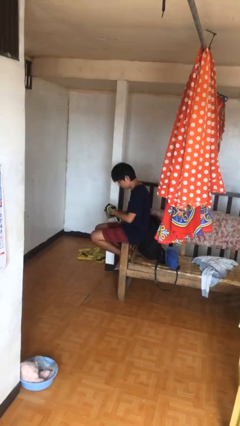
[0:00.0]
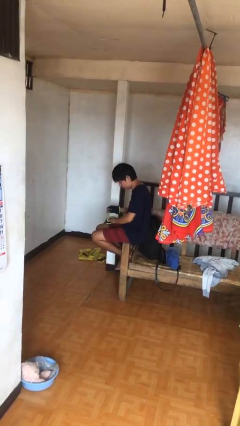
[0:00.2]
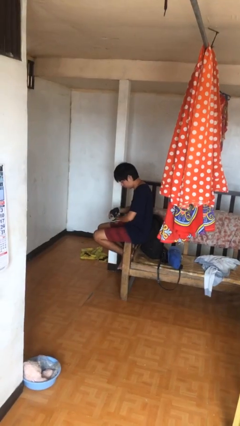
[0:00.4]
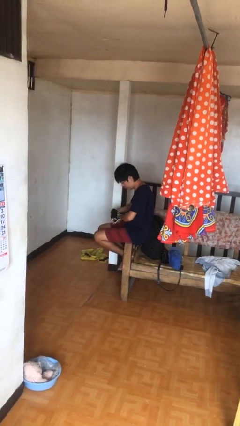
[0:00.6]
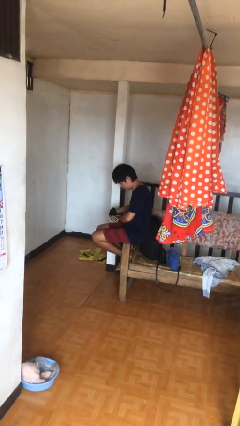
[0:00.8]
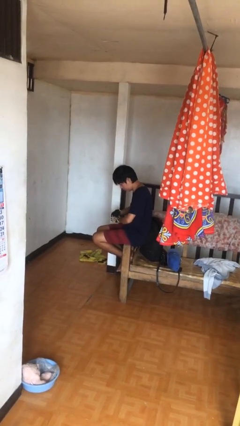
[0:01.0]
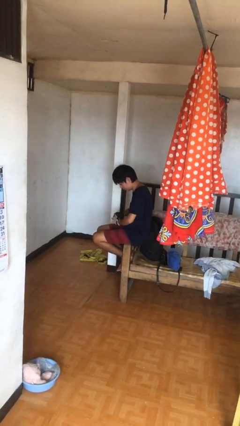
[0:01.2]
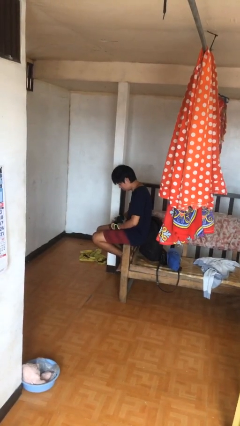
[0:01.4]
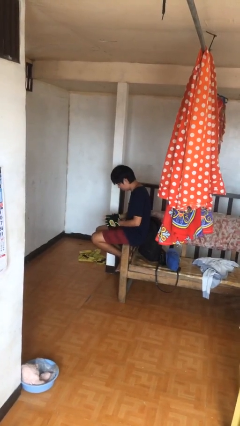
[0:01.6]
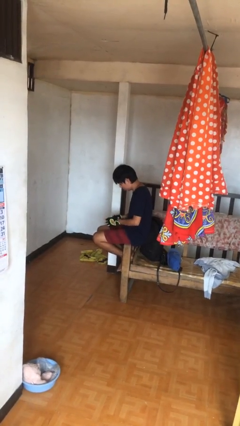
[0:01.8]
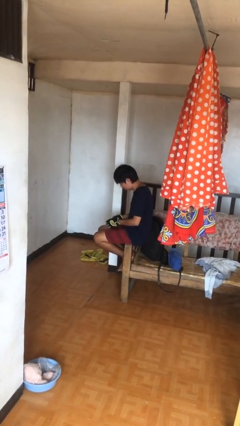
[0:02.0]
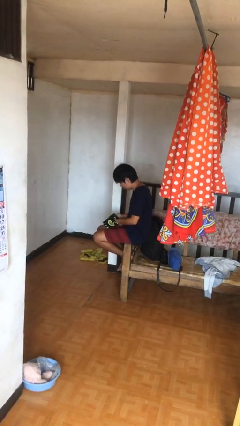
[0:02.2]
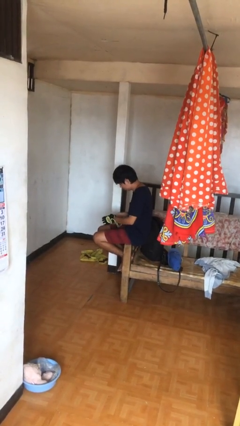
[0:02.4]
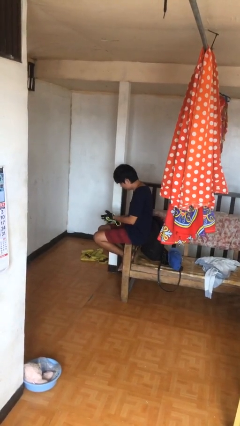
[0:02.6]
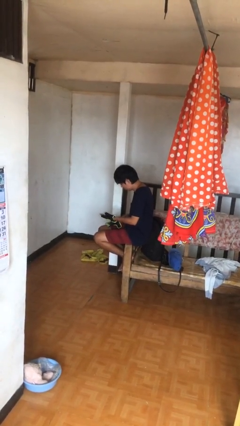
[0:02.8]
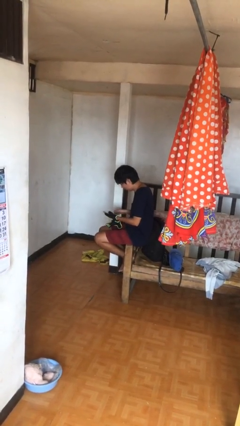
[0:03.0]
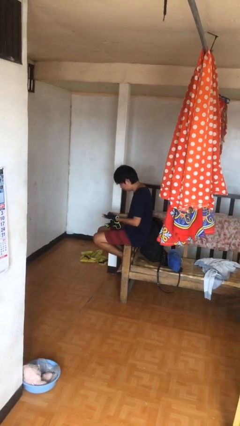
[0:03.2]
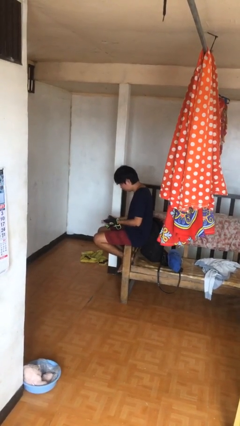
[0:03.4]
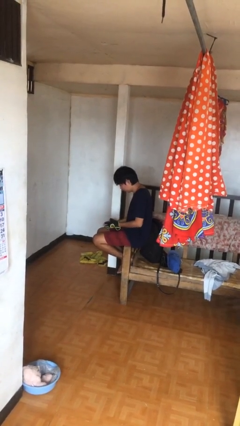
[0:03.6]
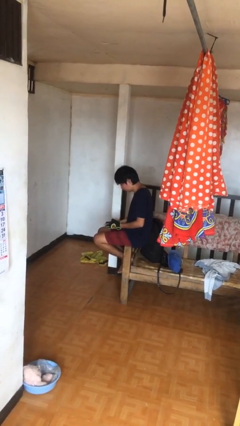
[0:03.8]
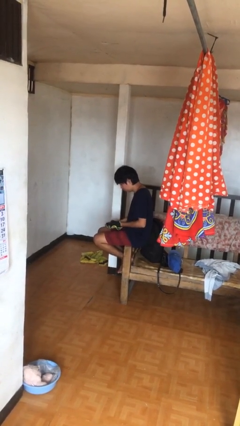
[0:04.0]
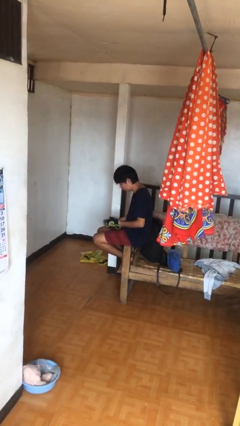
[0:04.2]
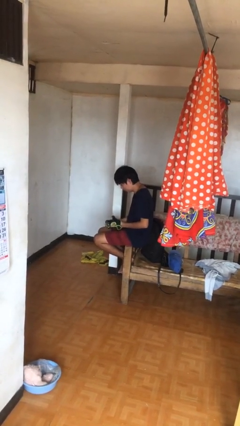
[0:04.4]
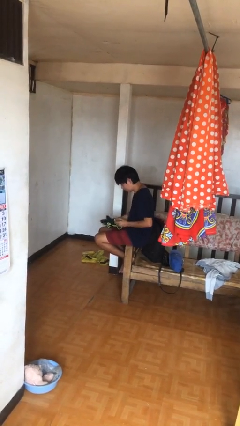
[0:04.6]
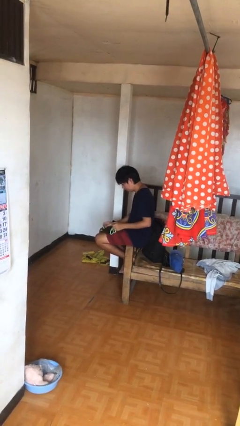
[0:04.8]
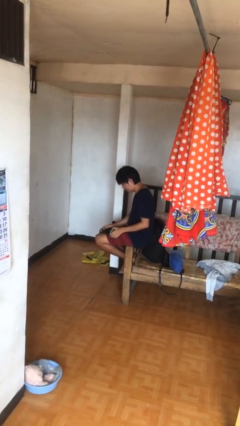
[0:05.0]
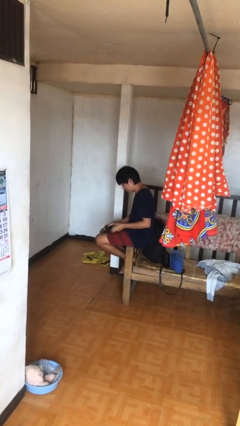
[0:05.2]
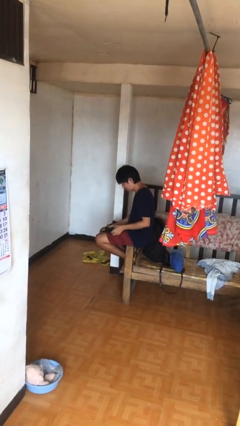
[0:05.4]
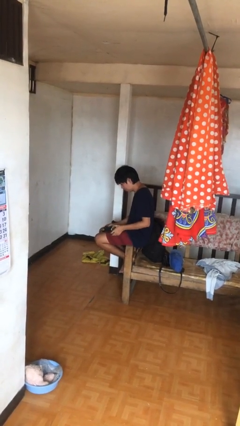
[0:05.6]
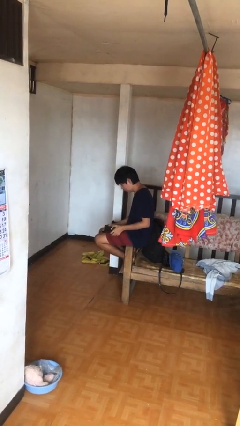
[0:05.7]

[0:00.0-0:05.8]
person takes off gloves

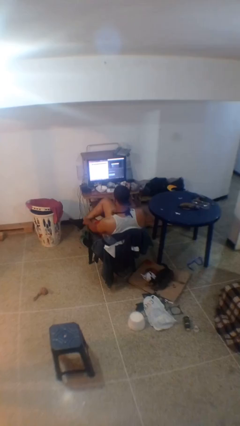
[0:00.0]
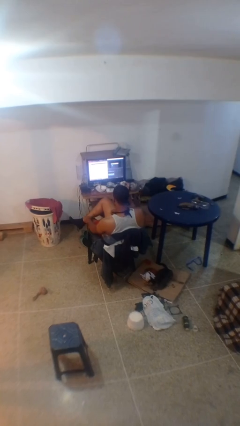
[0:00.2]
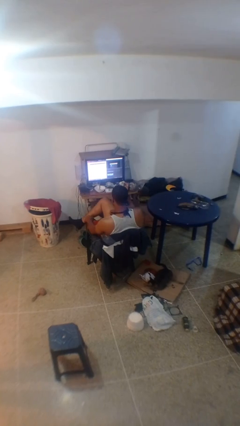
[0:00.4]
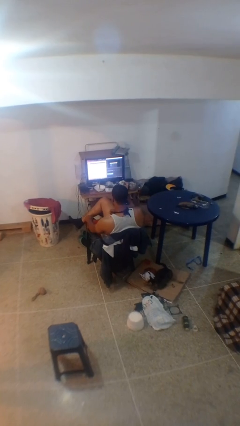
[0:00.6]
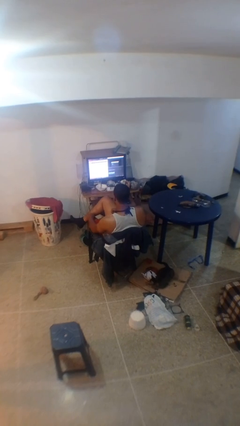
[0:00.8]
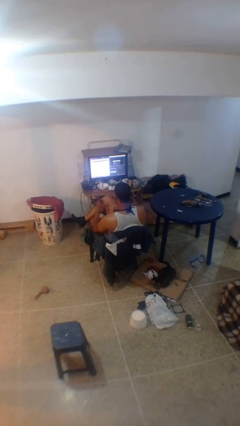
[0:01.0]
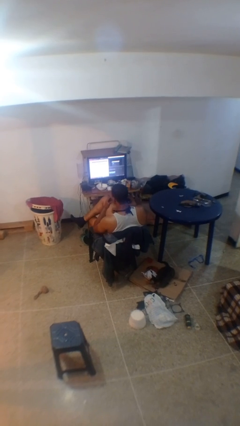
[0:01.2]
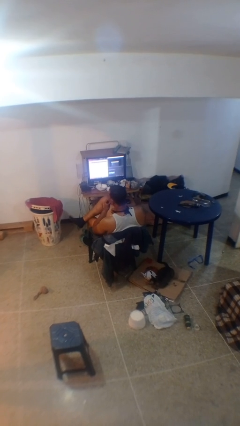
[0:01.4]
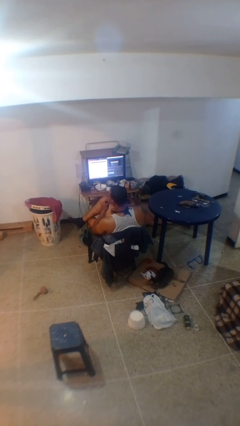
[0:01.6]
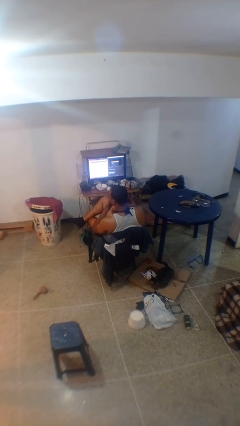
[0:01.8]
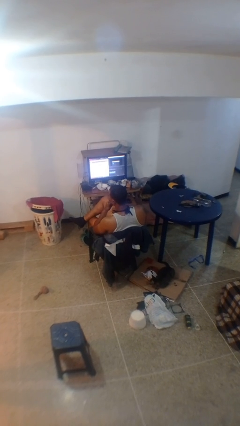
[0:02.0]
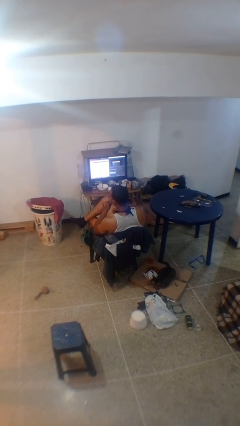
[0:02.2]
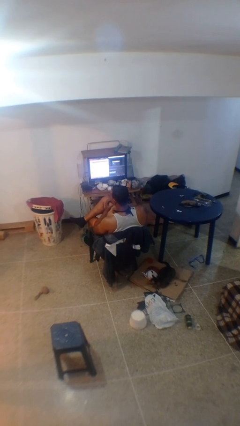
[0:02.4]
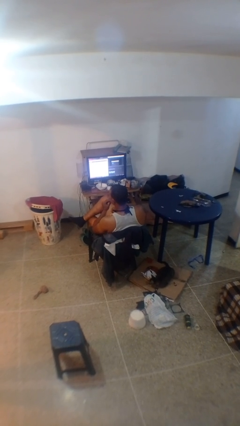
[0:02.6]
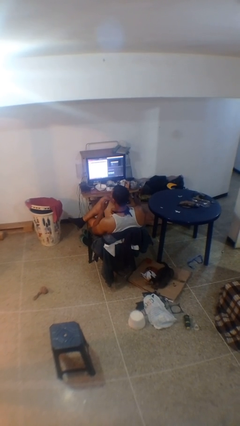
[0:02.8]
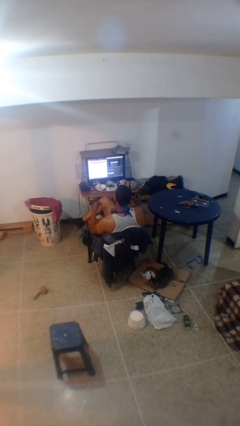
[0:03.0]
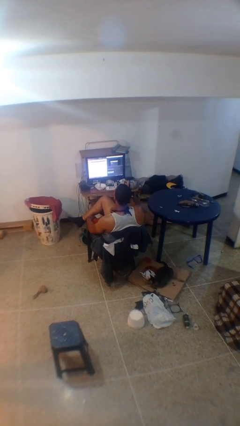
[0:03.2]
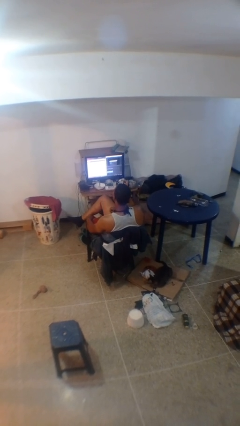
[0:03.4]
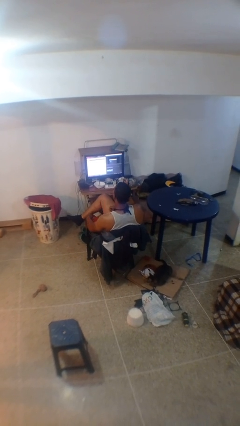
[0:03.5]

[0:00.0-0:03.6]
person strokes chin

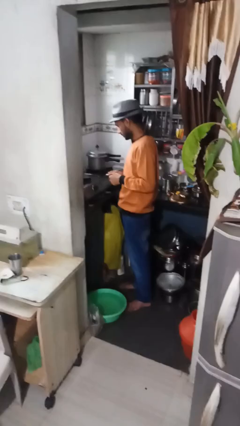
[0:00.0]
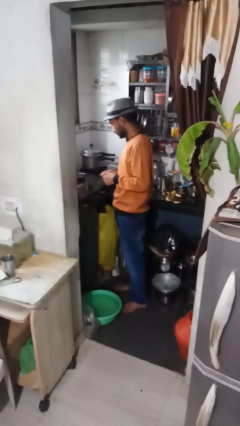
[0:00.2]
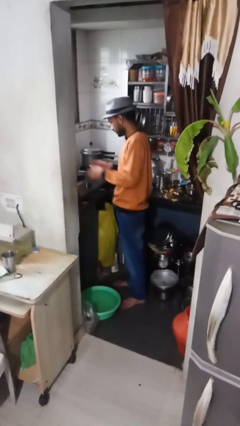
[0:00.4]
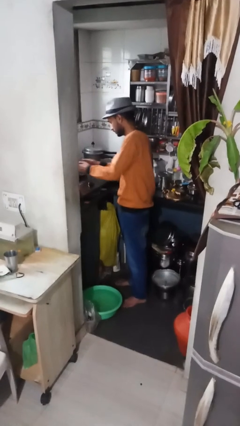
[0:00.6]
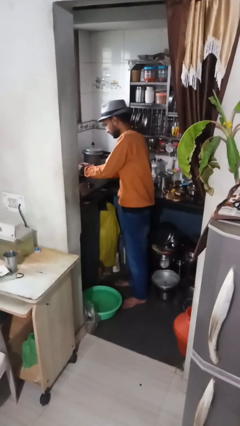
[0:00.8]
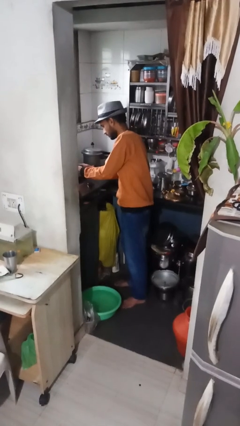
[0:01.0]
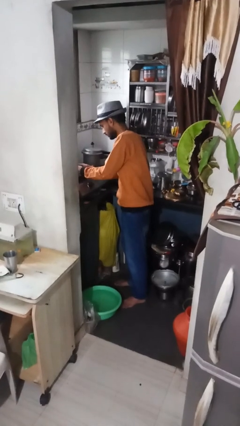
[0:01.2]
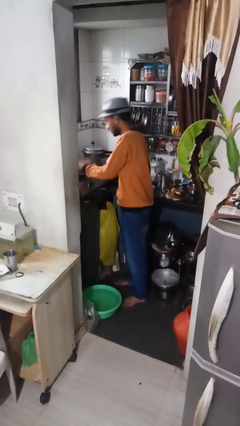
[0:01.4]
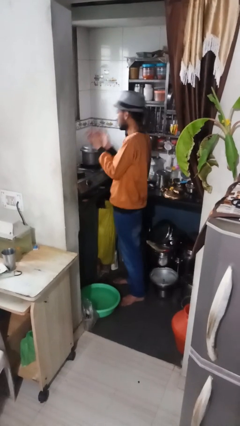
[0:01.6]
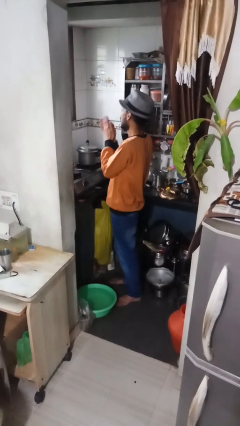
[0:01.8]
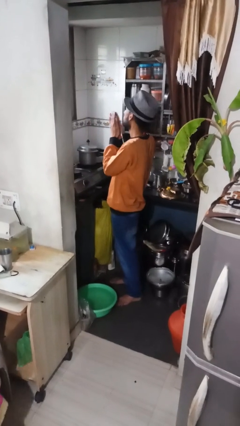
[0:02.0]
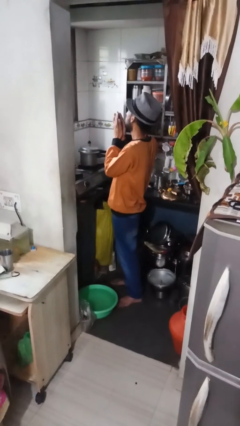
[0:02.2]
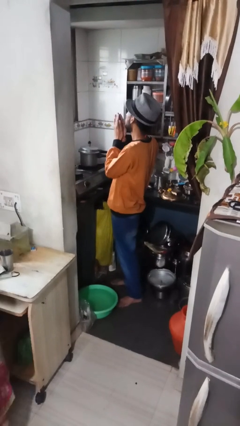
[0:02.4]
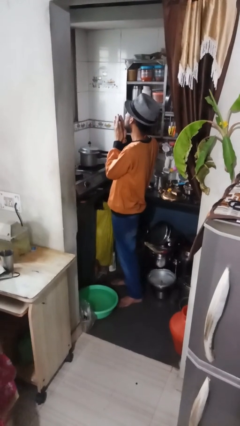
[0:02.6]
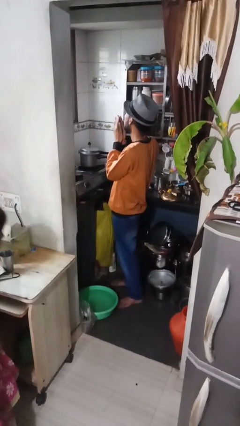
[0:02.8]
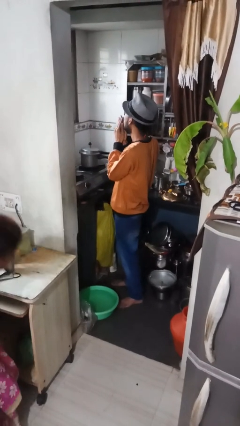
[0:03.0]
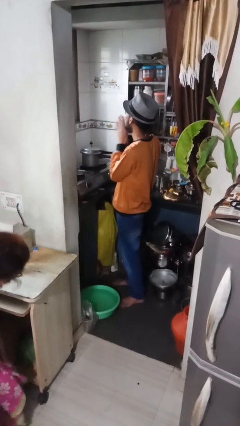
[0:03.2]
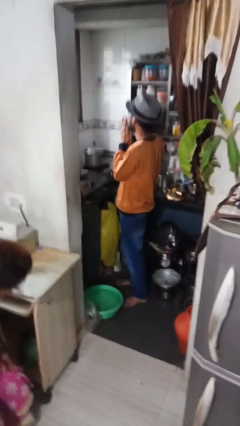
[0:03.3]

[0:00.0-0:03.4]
person burns hand

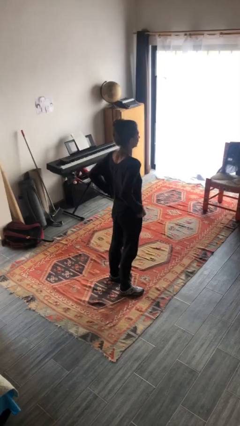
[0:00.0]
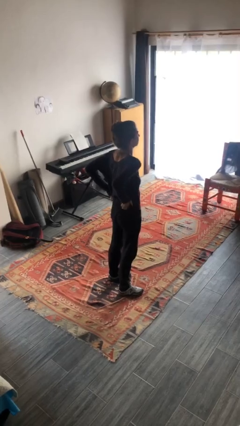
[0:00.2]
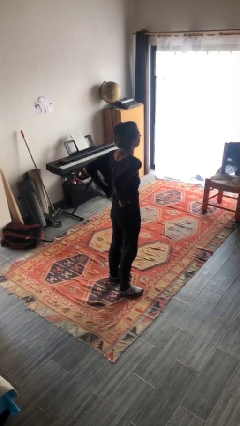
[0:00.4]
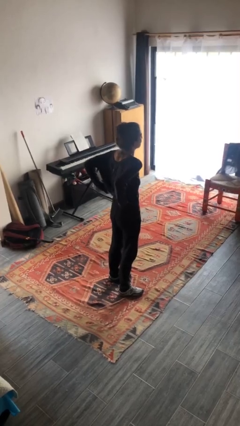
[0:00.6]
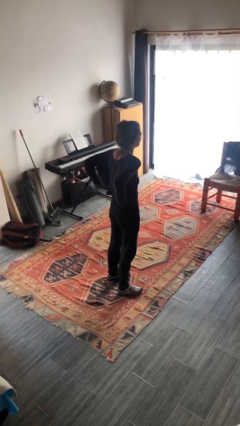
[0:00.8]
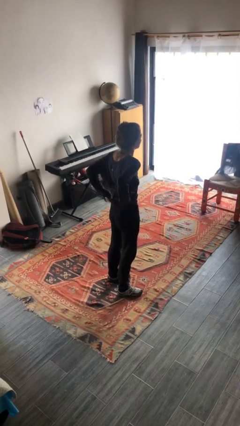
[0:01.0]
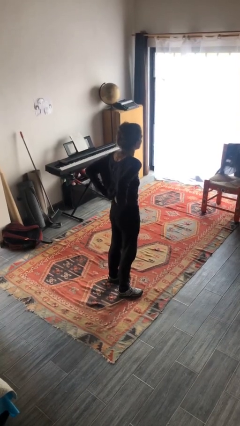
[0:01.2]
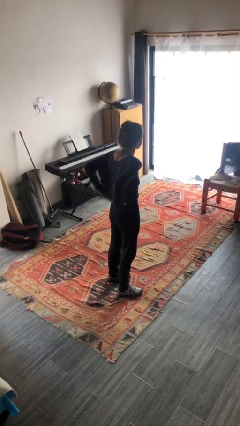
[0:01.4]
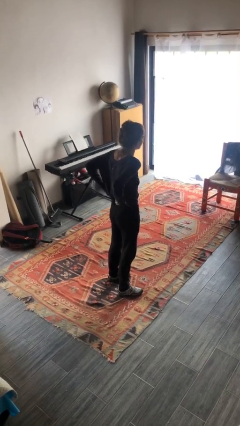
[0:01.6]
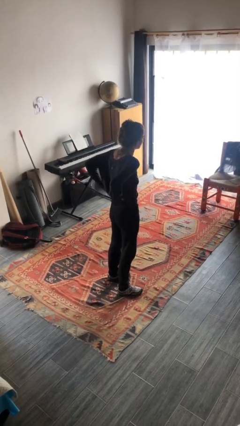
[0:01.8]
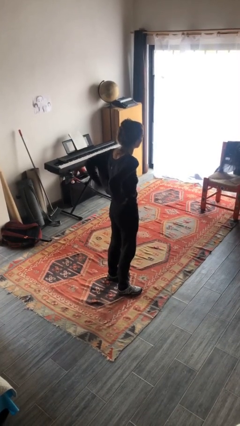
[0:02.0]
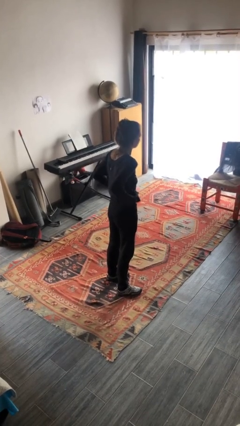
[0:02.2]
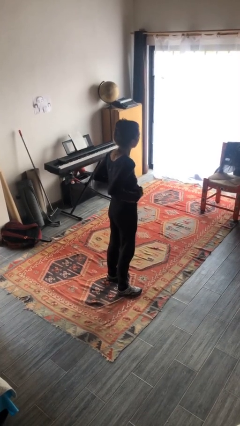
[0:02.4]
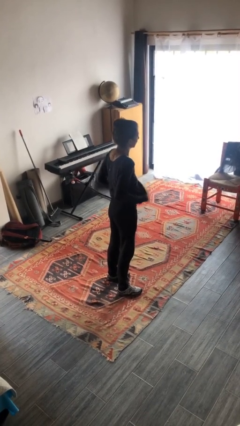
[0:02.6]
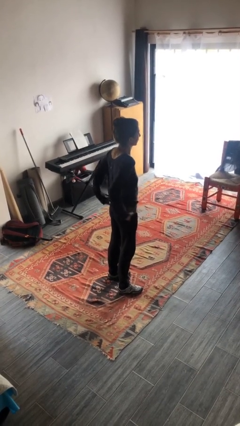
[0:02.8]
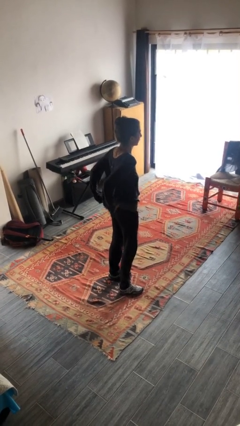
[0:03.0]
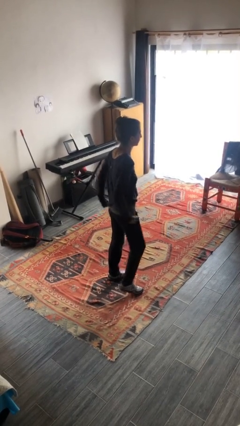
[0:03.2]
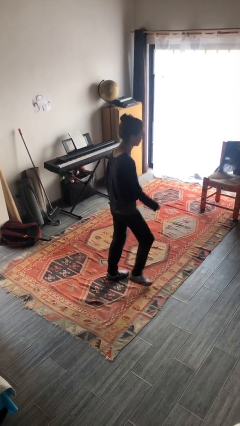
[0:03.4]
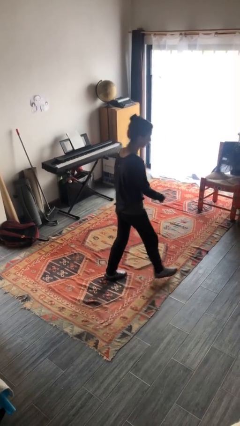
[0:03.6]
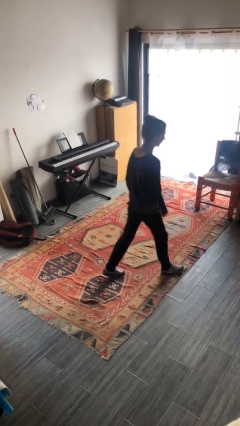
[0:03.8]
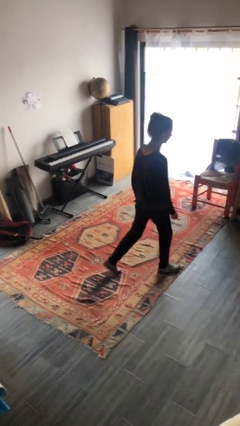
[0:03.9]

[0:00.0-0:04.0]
person untucks shirt

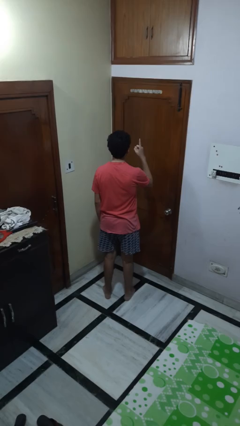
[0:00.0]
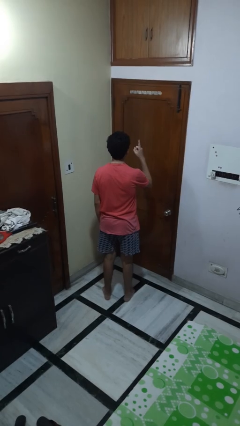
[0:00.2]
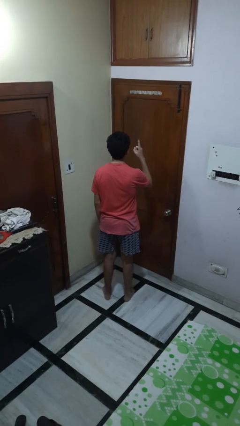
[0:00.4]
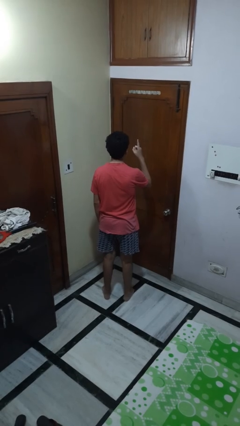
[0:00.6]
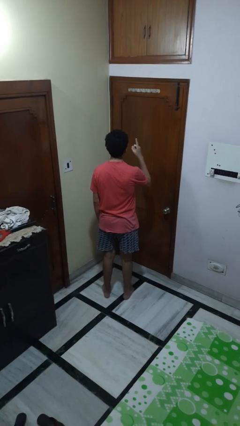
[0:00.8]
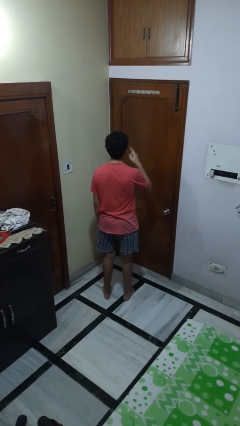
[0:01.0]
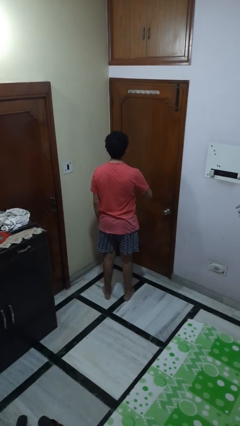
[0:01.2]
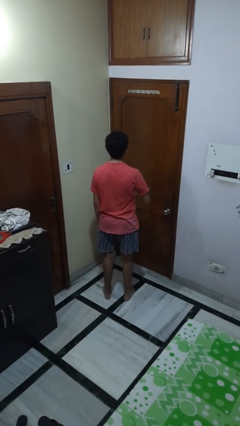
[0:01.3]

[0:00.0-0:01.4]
person gestures number one
